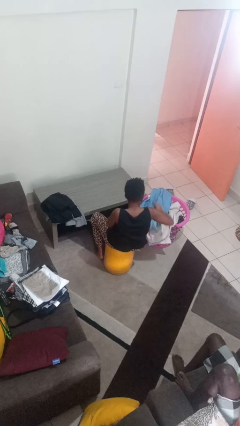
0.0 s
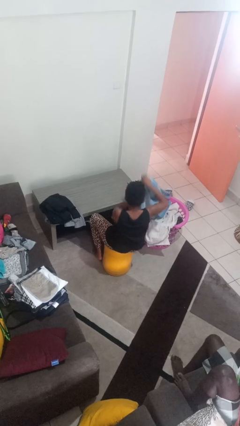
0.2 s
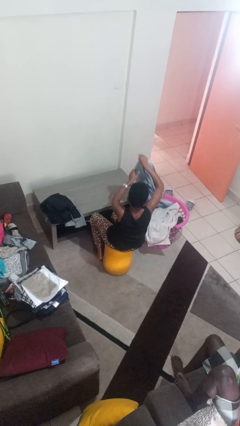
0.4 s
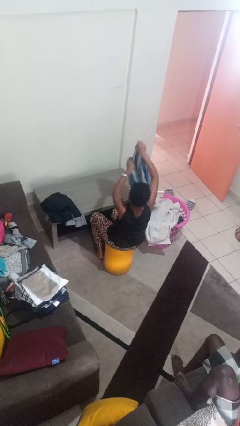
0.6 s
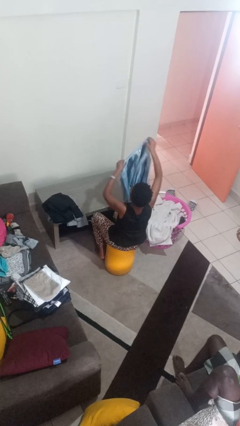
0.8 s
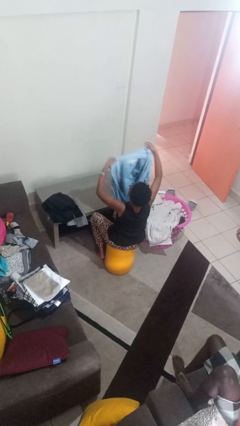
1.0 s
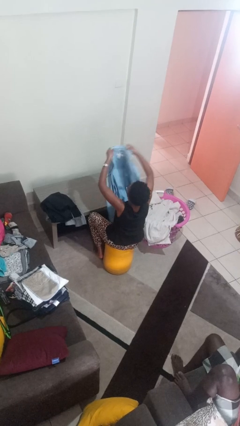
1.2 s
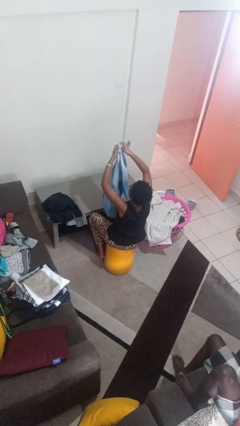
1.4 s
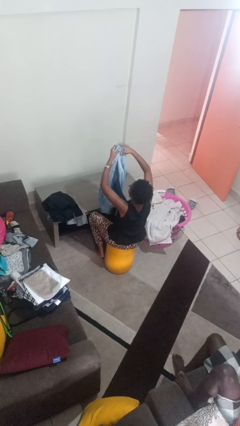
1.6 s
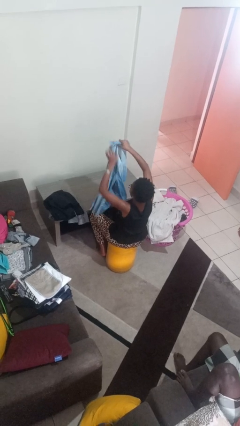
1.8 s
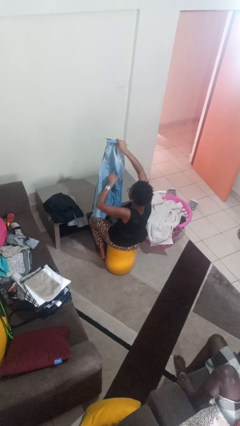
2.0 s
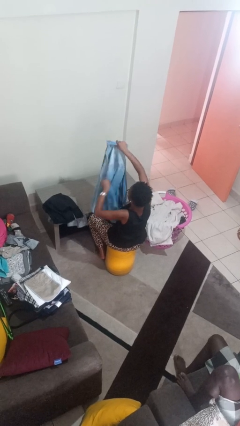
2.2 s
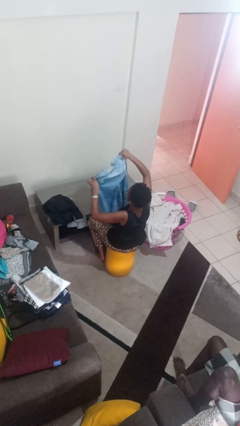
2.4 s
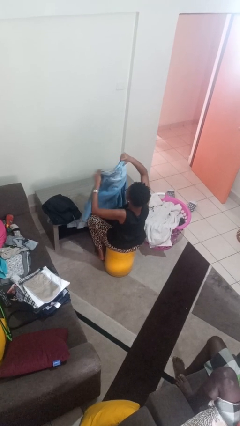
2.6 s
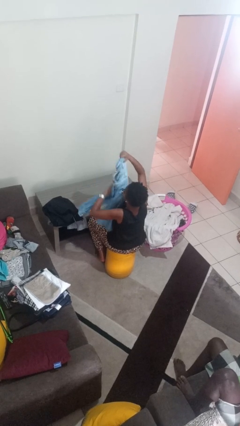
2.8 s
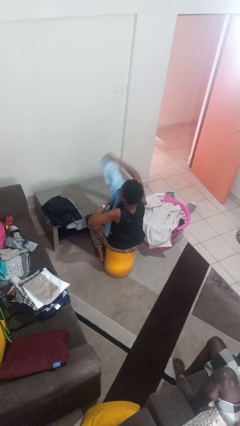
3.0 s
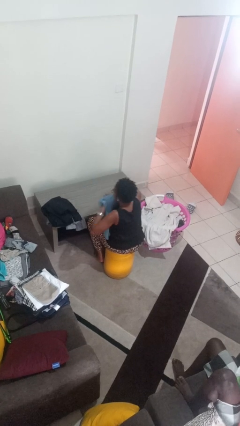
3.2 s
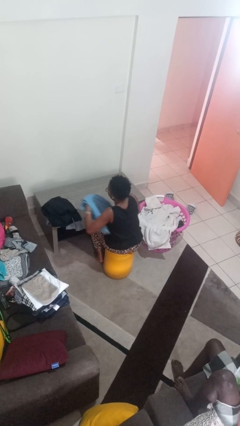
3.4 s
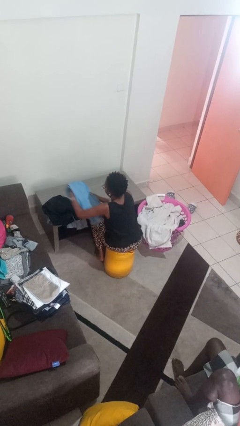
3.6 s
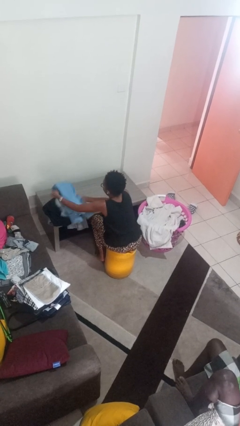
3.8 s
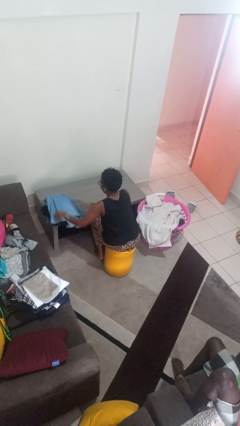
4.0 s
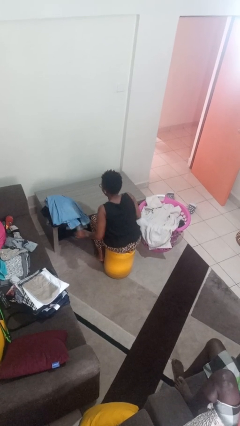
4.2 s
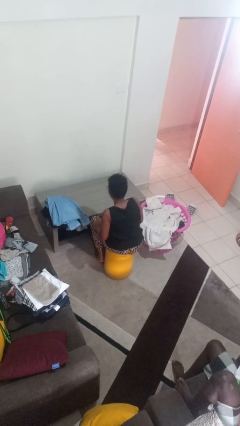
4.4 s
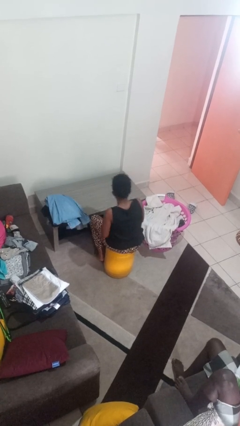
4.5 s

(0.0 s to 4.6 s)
person folds shirt

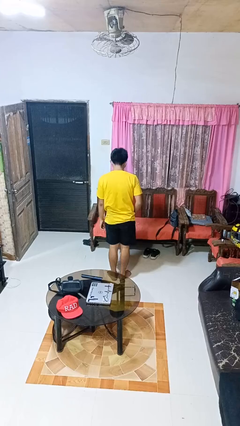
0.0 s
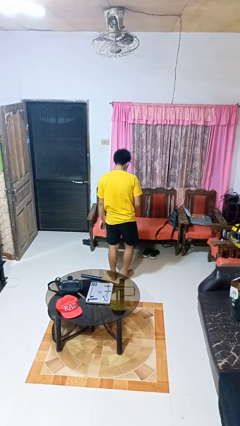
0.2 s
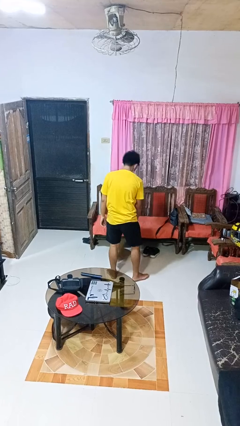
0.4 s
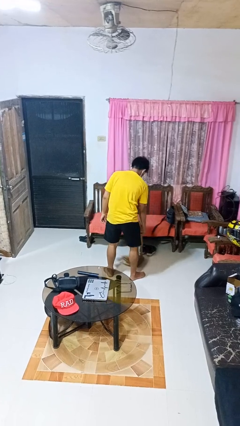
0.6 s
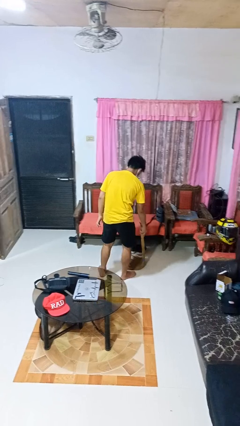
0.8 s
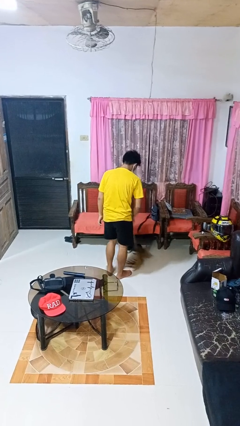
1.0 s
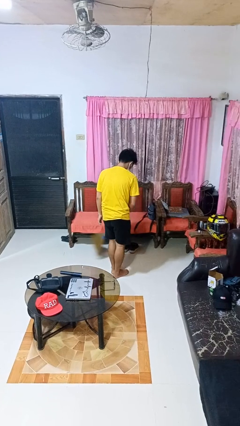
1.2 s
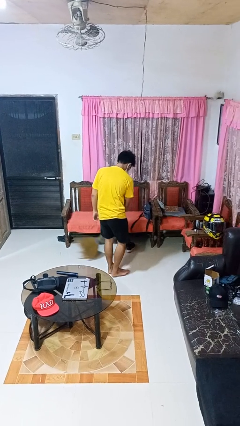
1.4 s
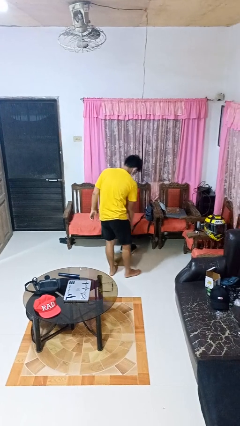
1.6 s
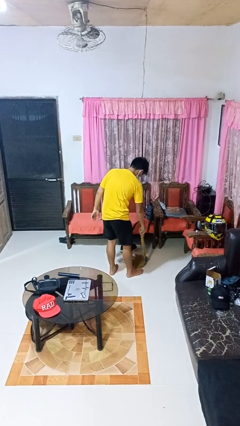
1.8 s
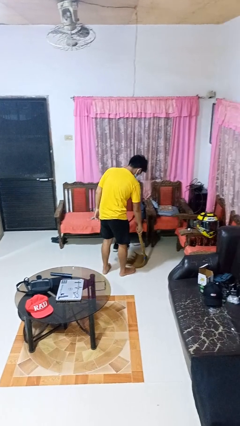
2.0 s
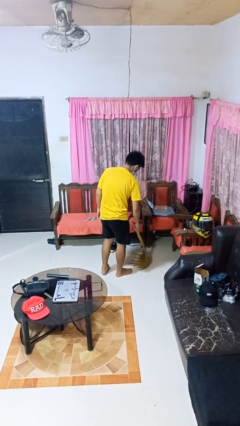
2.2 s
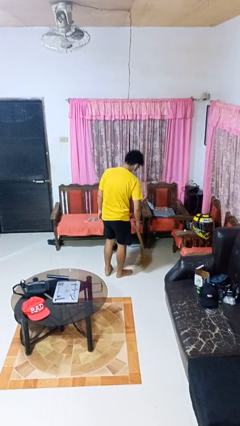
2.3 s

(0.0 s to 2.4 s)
person sweeps floor

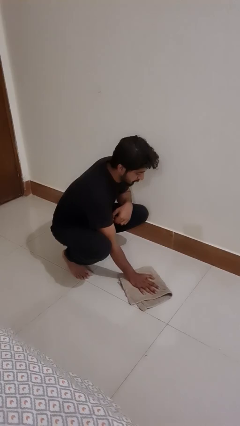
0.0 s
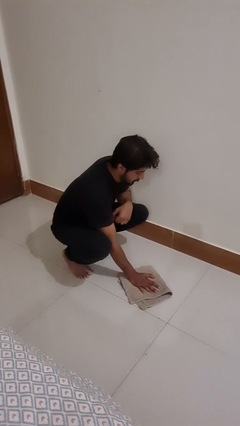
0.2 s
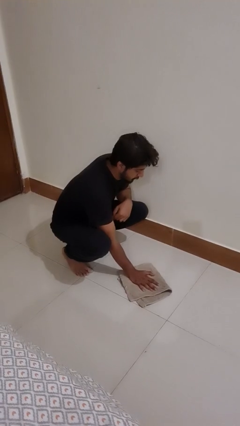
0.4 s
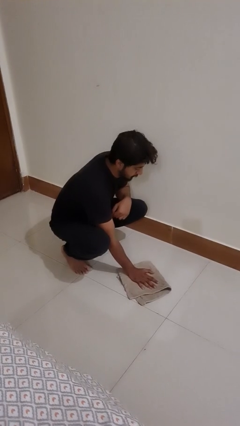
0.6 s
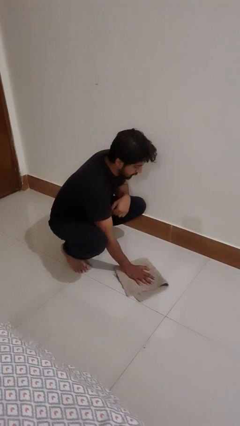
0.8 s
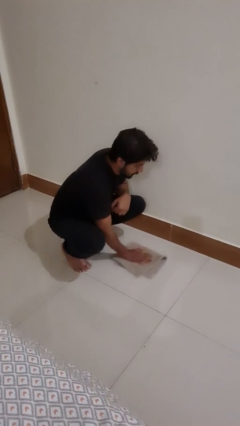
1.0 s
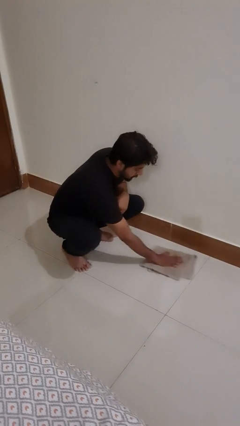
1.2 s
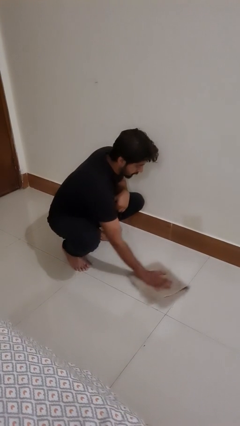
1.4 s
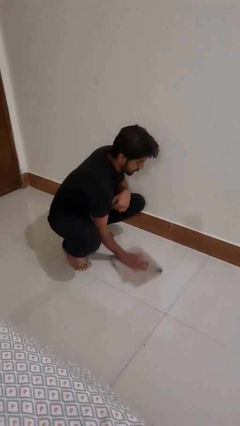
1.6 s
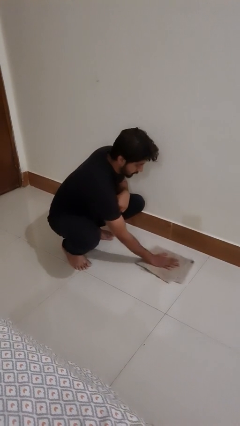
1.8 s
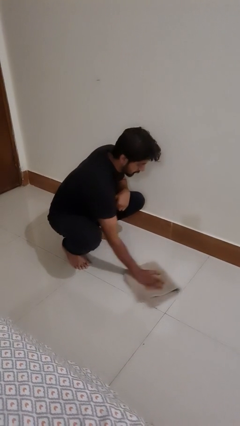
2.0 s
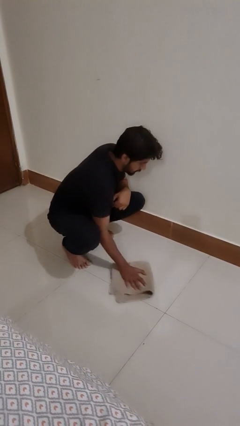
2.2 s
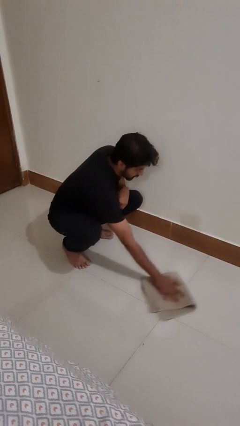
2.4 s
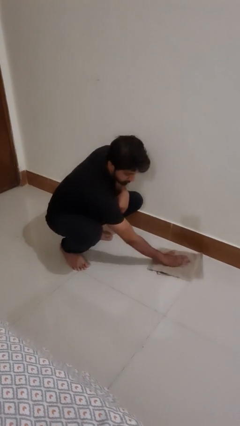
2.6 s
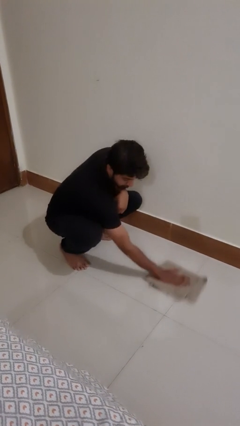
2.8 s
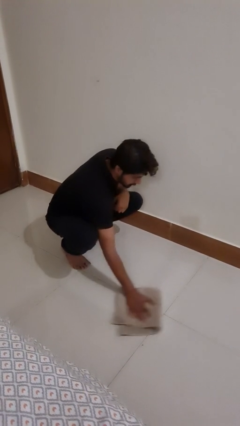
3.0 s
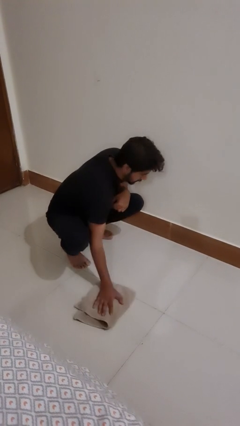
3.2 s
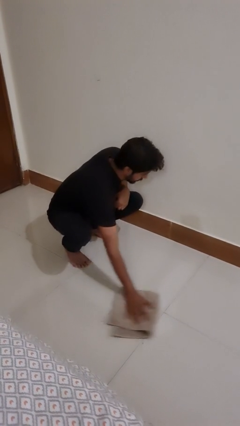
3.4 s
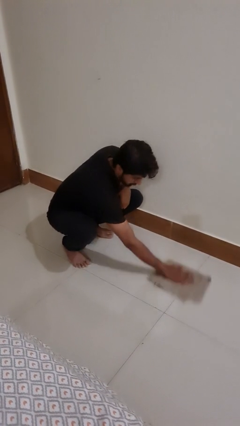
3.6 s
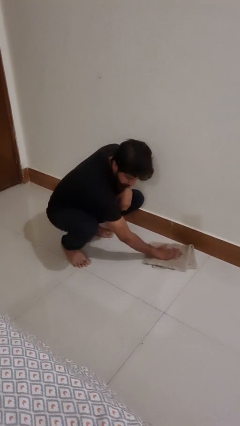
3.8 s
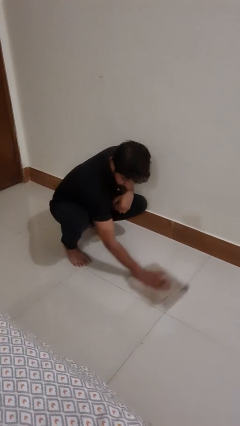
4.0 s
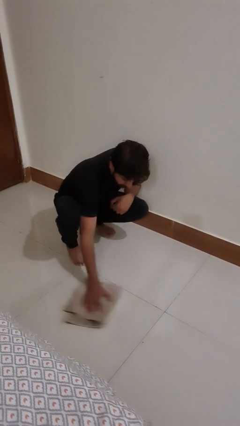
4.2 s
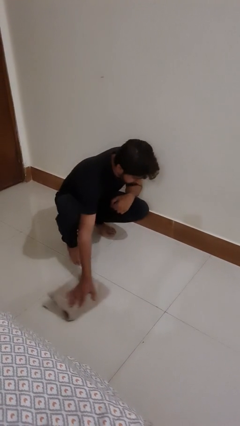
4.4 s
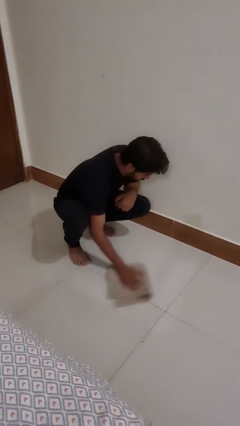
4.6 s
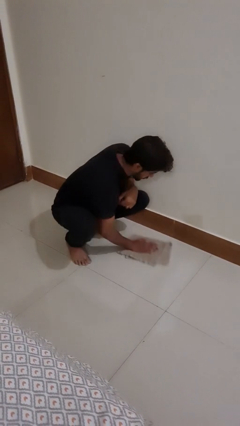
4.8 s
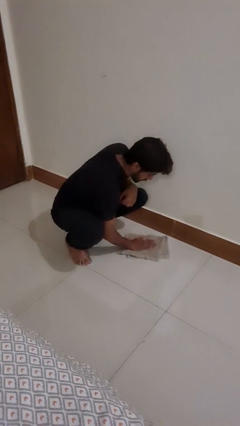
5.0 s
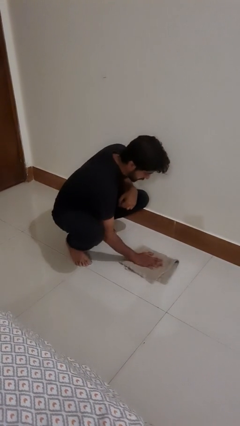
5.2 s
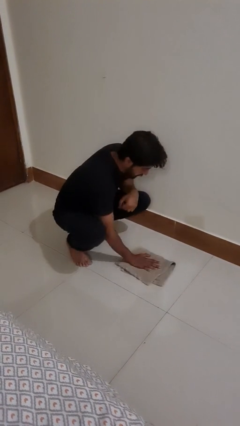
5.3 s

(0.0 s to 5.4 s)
person mops

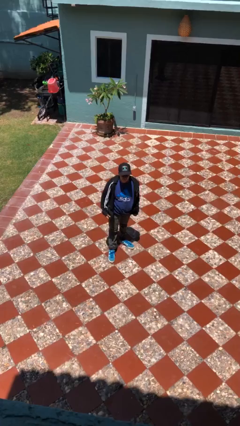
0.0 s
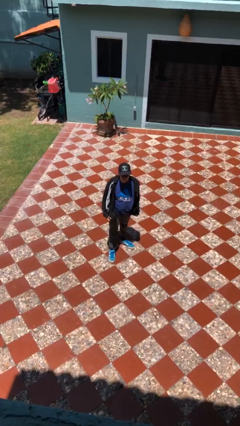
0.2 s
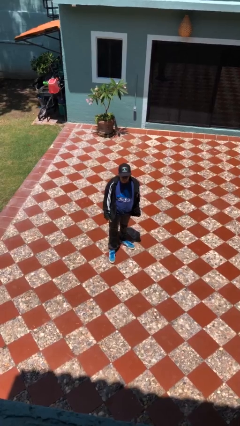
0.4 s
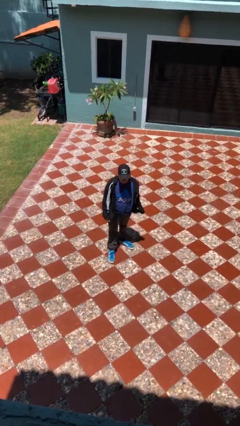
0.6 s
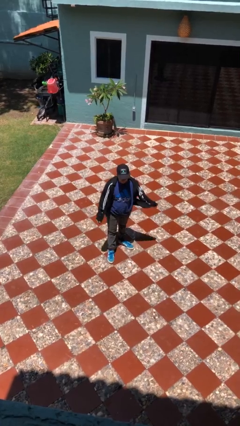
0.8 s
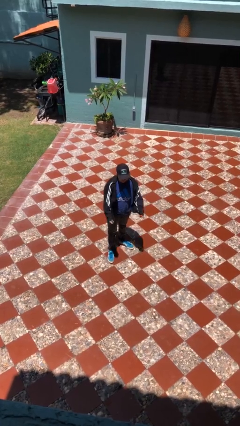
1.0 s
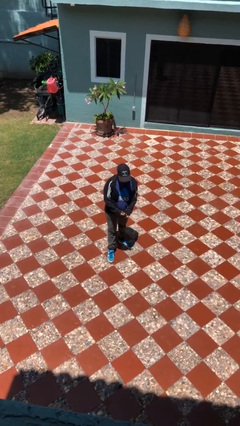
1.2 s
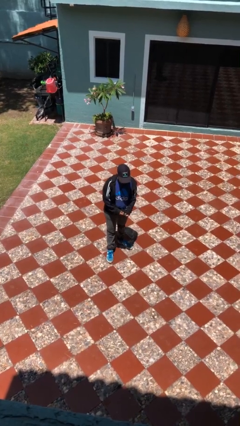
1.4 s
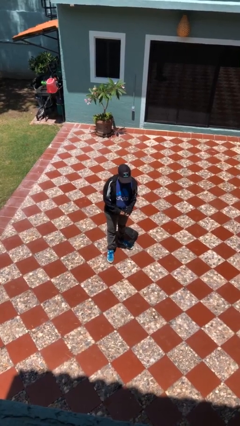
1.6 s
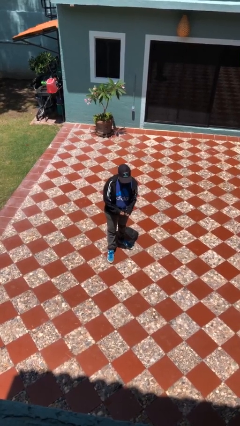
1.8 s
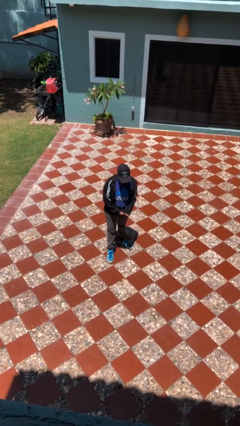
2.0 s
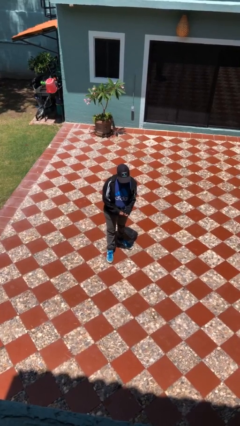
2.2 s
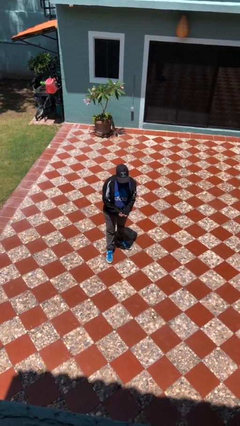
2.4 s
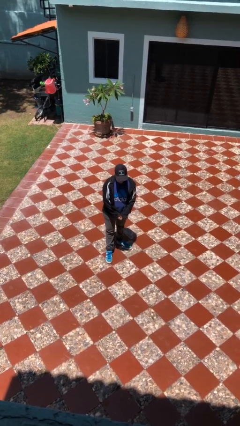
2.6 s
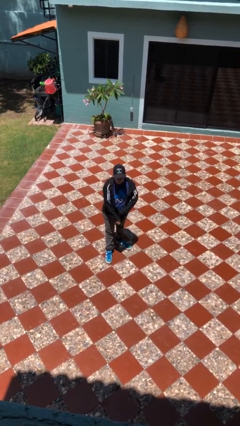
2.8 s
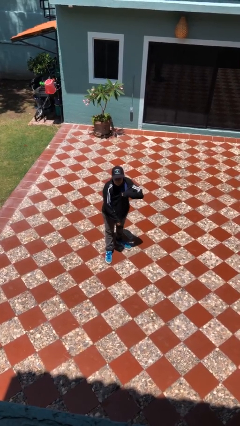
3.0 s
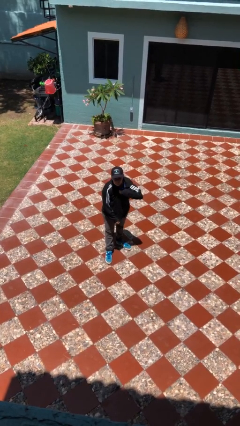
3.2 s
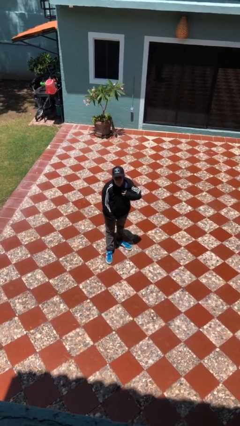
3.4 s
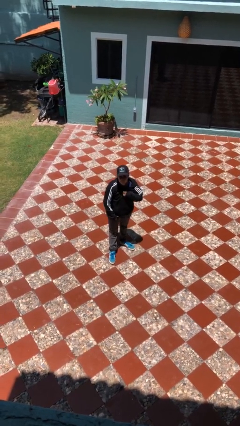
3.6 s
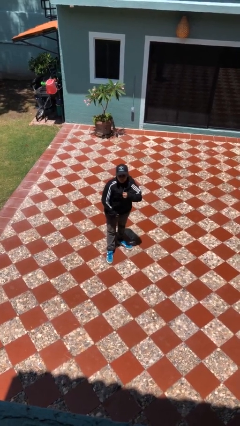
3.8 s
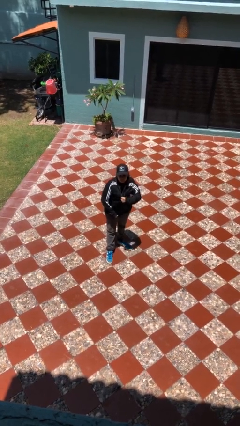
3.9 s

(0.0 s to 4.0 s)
person zips up jacket

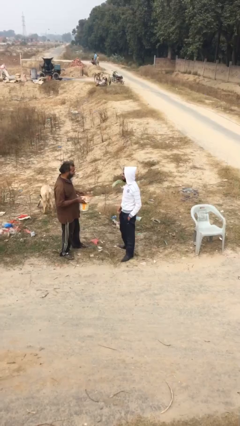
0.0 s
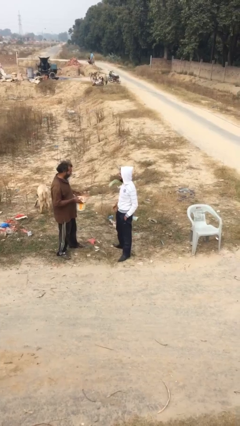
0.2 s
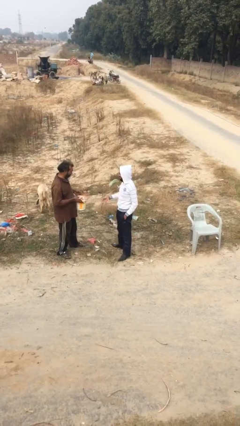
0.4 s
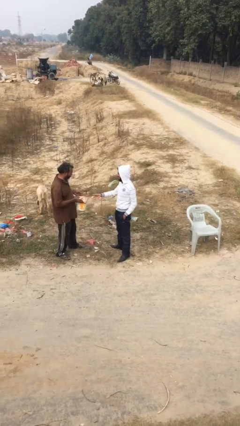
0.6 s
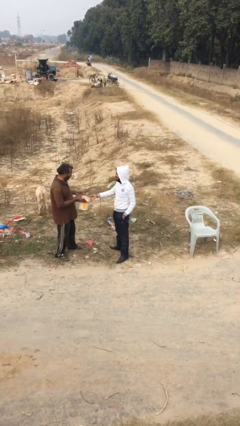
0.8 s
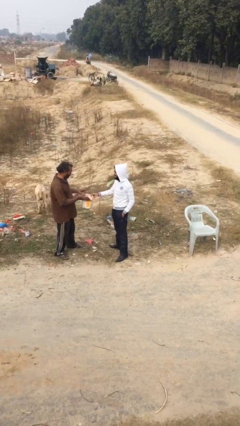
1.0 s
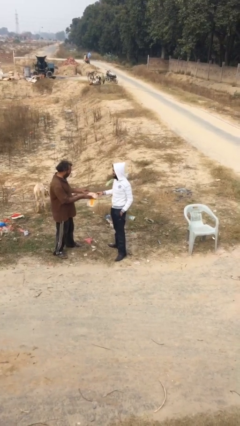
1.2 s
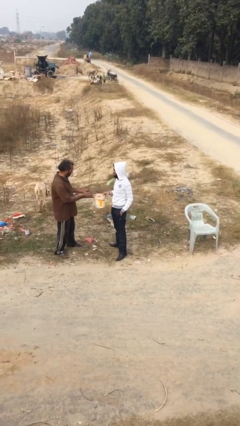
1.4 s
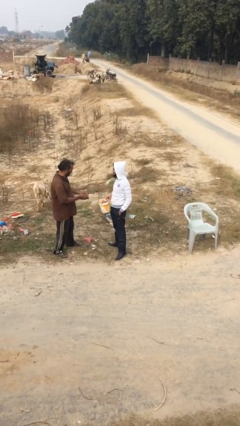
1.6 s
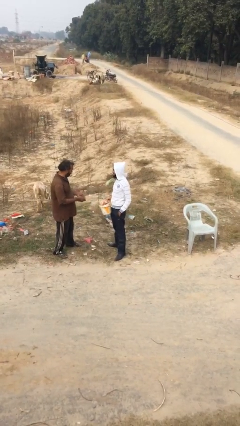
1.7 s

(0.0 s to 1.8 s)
person transfers object to person
